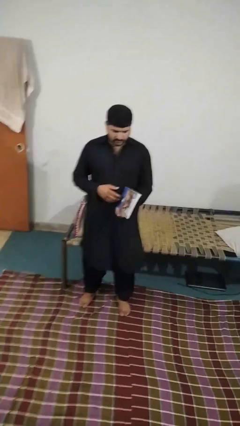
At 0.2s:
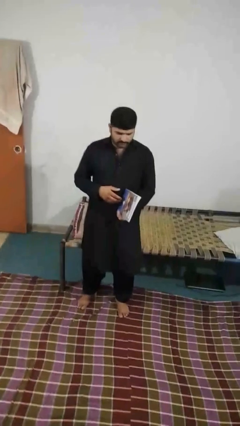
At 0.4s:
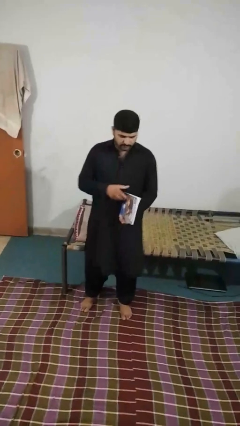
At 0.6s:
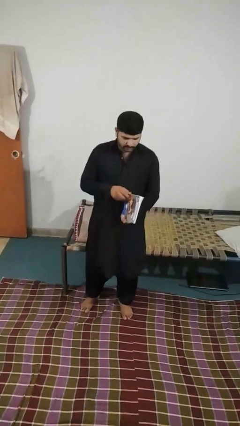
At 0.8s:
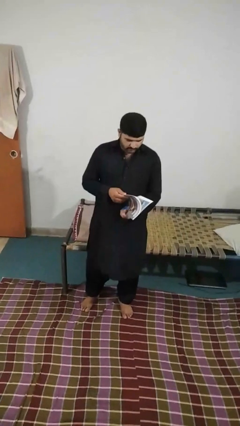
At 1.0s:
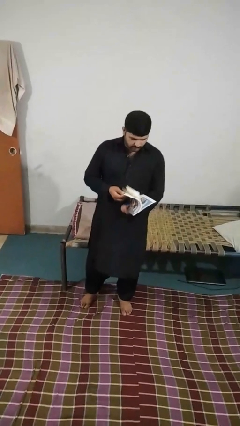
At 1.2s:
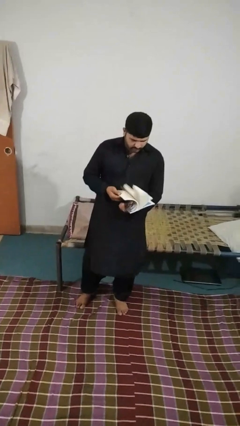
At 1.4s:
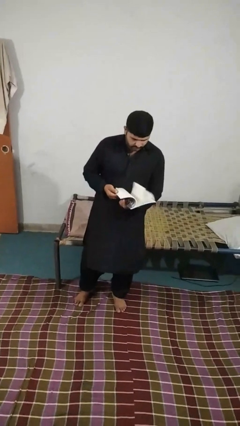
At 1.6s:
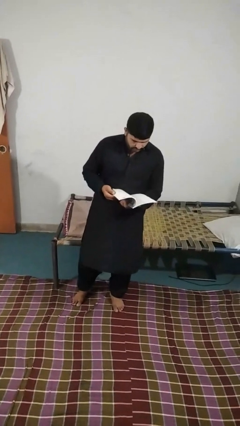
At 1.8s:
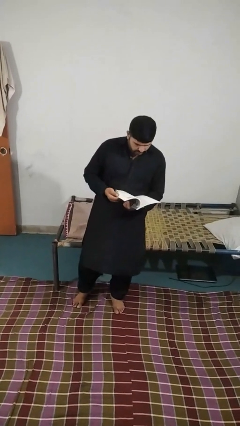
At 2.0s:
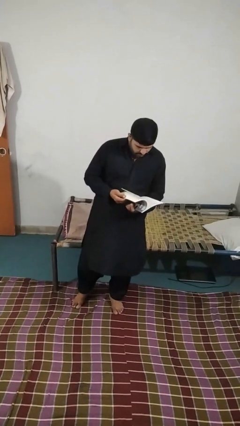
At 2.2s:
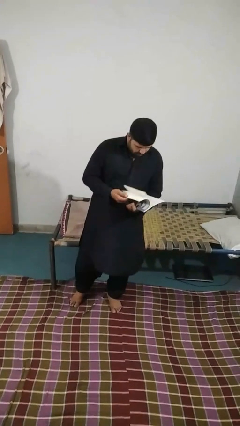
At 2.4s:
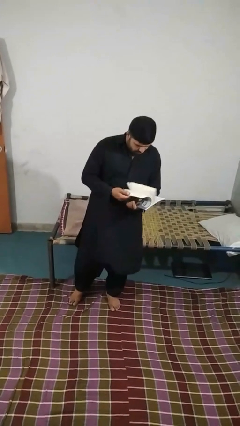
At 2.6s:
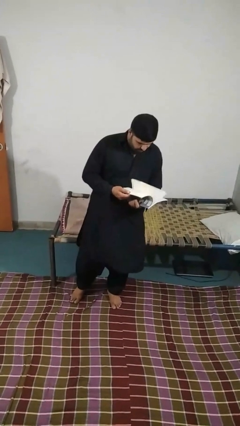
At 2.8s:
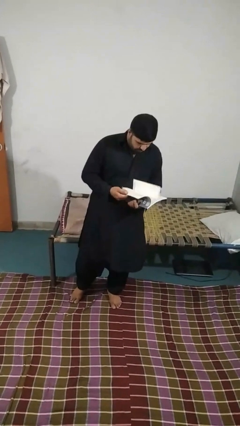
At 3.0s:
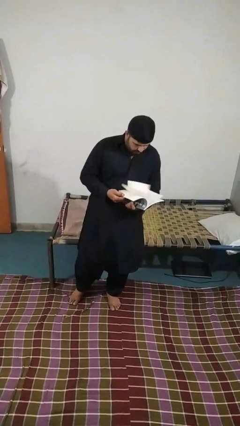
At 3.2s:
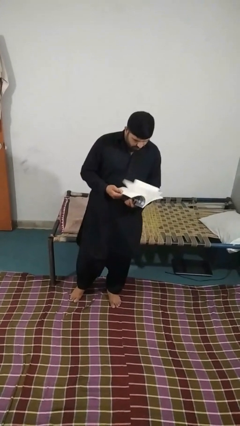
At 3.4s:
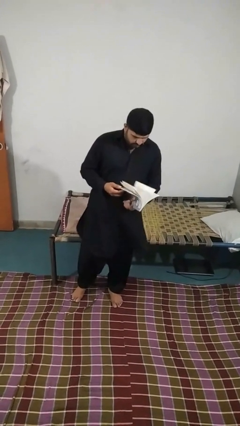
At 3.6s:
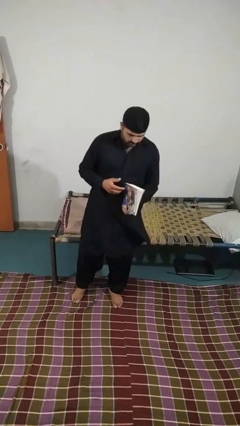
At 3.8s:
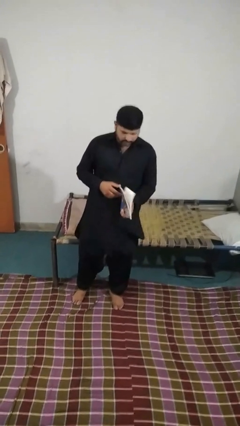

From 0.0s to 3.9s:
person reads magazine

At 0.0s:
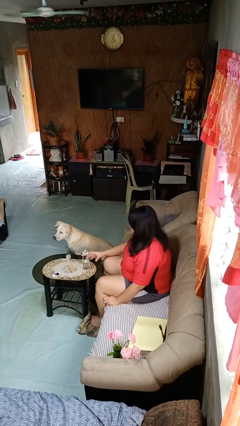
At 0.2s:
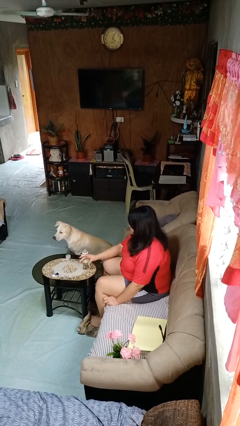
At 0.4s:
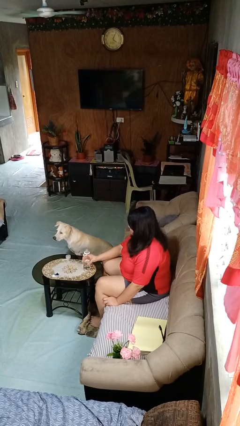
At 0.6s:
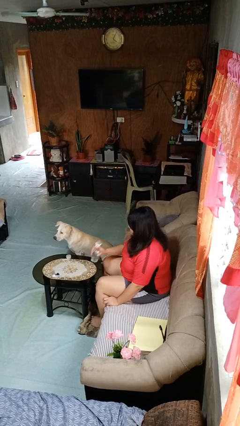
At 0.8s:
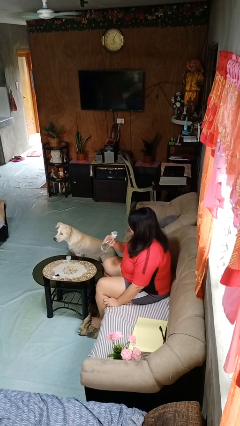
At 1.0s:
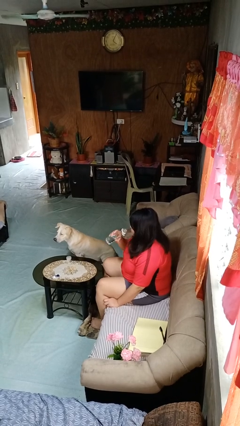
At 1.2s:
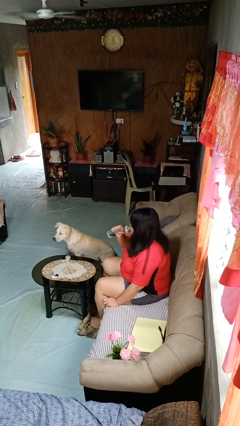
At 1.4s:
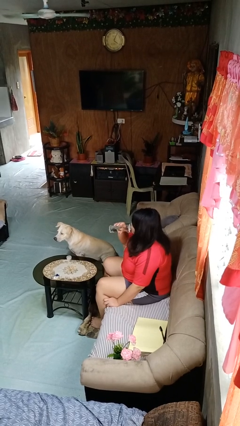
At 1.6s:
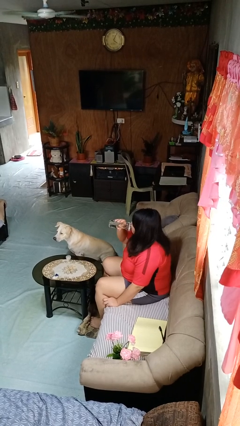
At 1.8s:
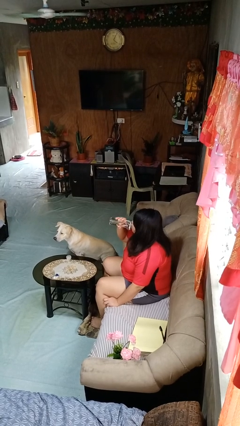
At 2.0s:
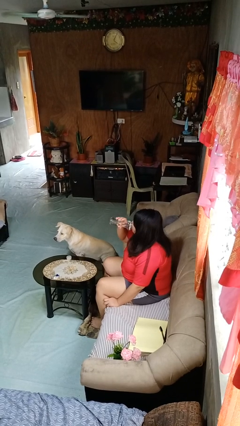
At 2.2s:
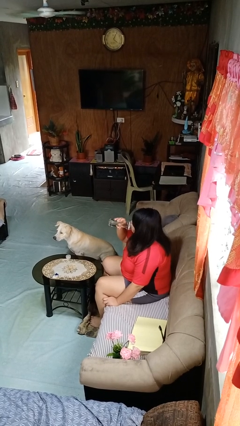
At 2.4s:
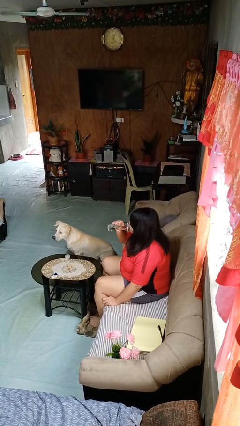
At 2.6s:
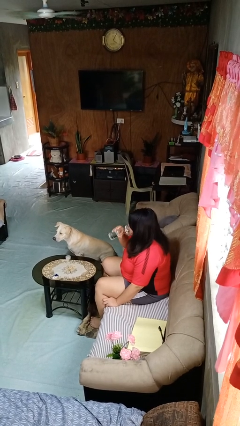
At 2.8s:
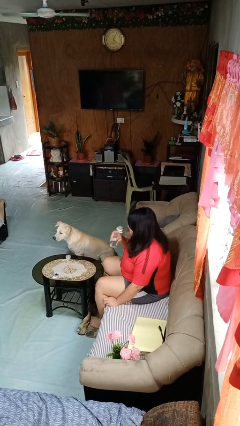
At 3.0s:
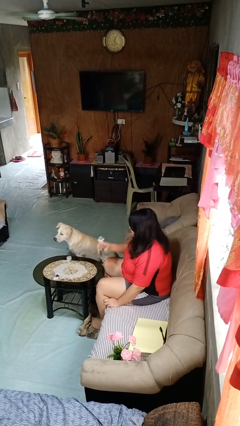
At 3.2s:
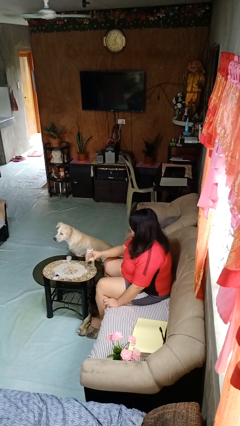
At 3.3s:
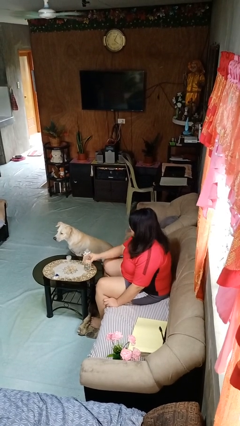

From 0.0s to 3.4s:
person drinks from bottle

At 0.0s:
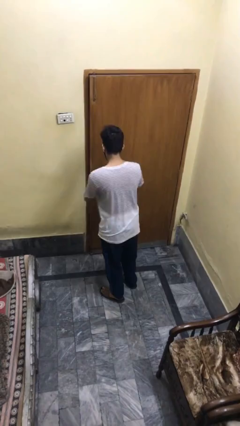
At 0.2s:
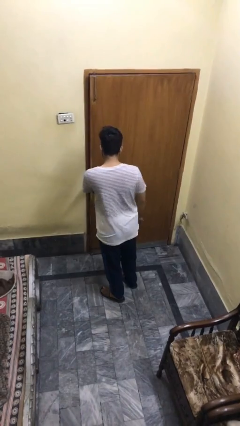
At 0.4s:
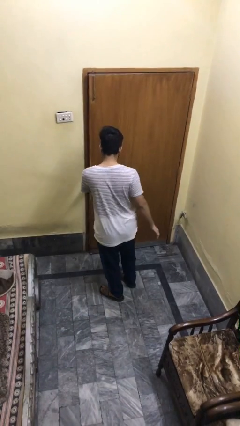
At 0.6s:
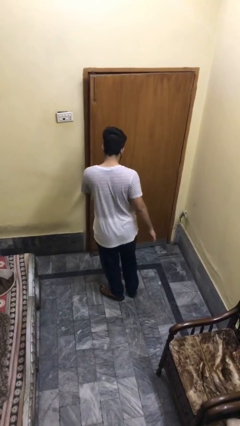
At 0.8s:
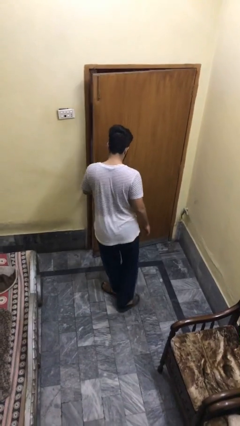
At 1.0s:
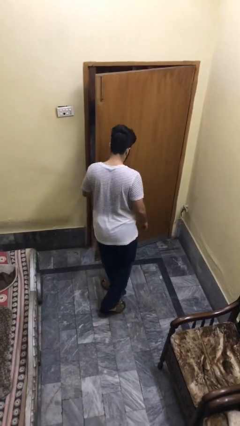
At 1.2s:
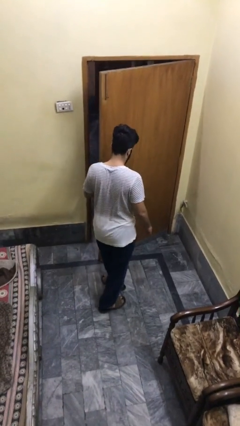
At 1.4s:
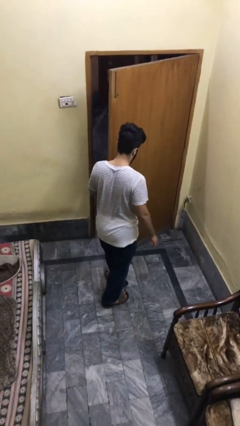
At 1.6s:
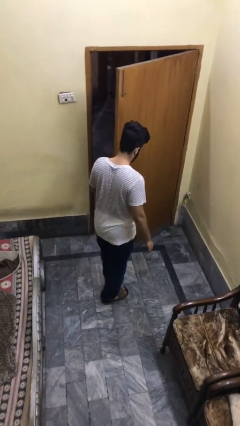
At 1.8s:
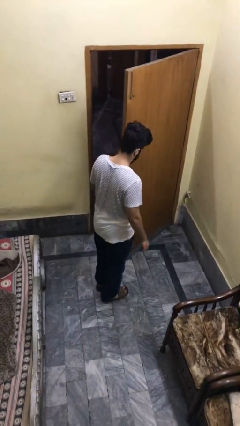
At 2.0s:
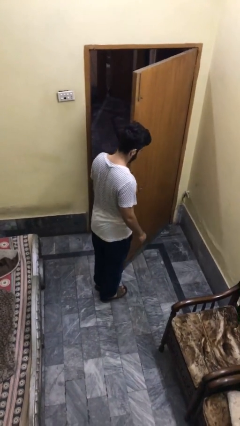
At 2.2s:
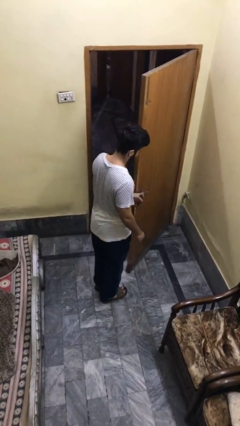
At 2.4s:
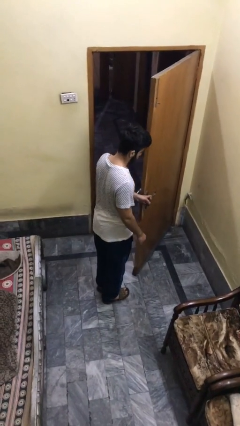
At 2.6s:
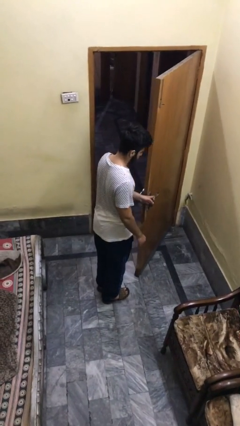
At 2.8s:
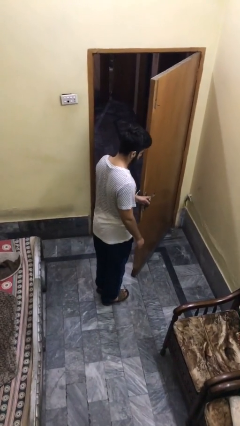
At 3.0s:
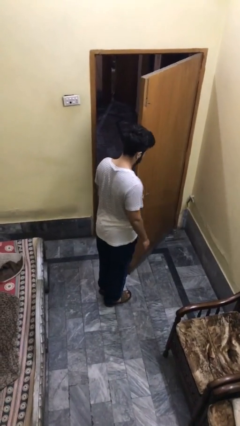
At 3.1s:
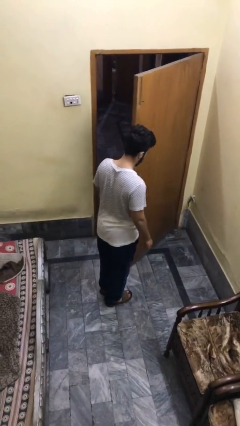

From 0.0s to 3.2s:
person opens facility door

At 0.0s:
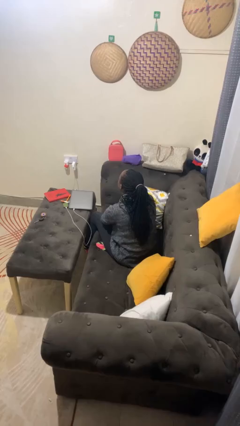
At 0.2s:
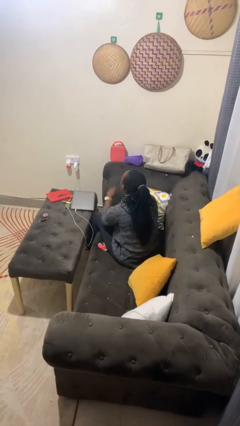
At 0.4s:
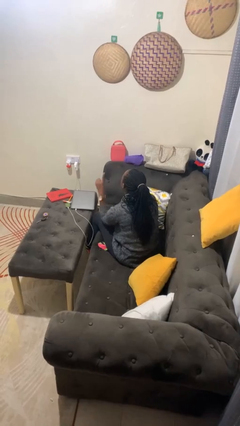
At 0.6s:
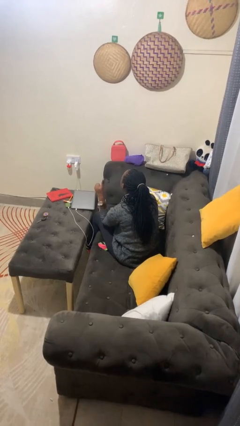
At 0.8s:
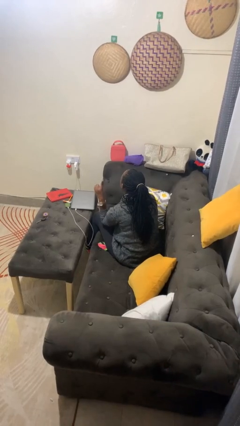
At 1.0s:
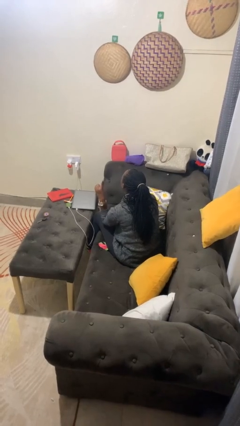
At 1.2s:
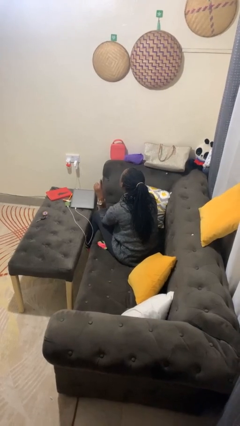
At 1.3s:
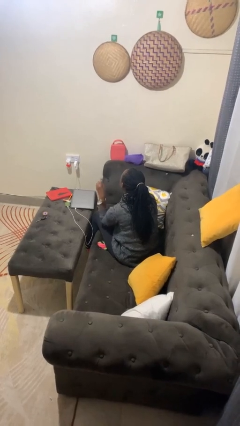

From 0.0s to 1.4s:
person gestures number one

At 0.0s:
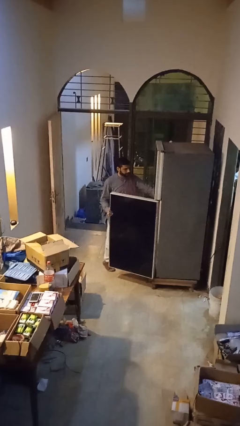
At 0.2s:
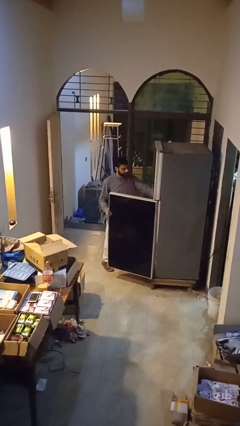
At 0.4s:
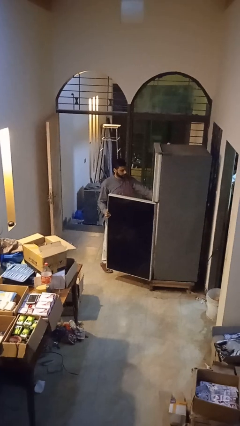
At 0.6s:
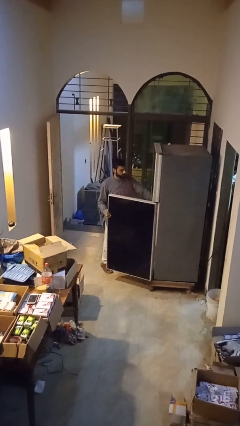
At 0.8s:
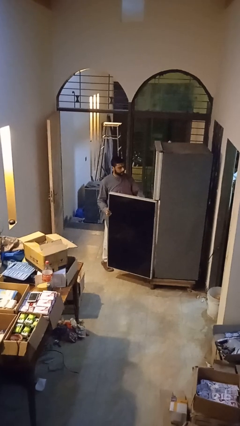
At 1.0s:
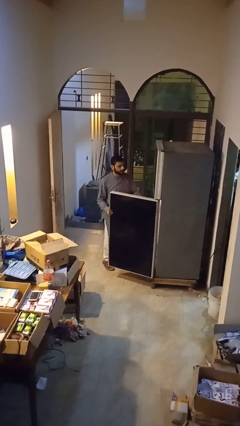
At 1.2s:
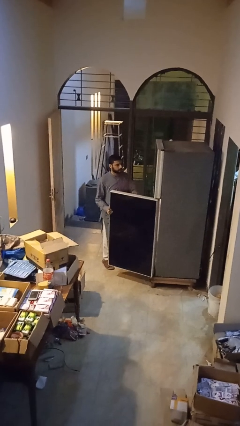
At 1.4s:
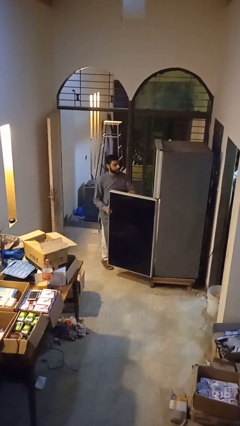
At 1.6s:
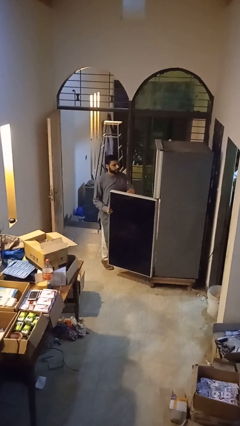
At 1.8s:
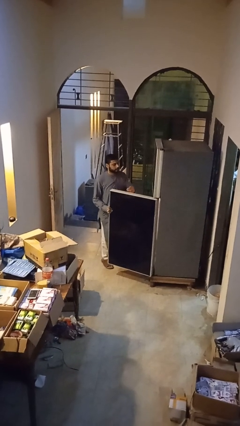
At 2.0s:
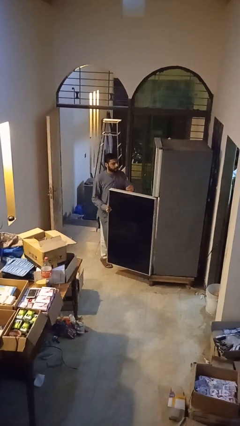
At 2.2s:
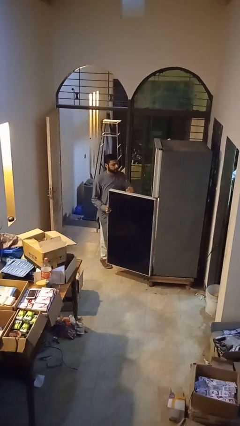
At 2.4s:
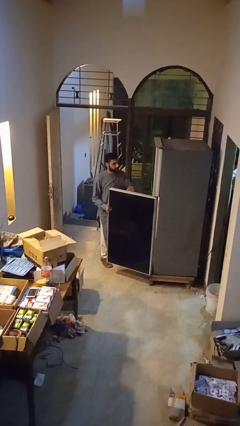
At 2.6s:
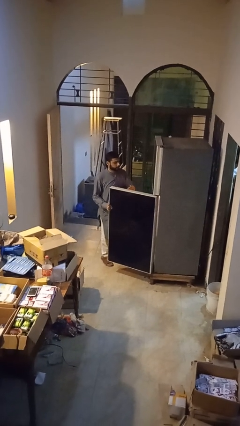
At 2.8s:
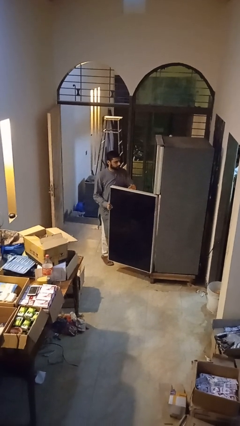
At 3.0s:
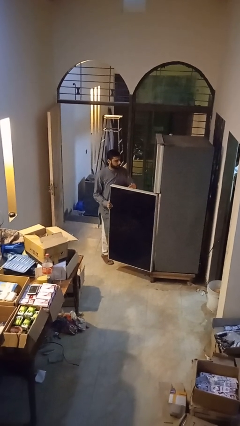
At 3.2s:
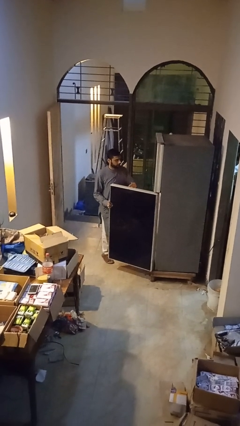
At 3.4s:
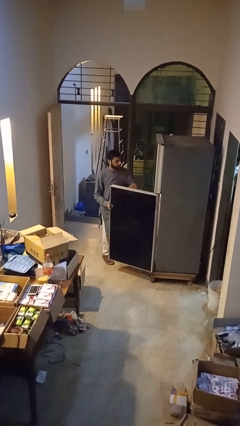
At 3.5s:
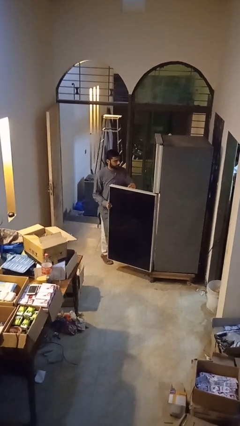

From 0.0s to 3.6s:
person puts object into refrigerator

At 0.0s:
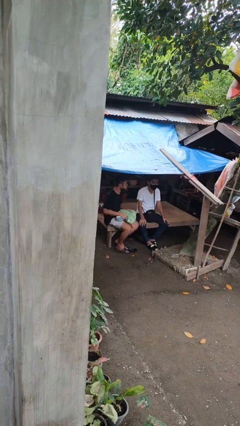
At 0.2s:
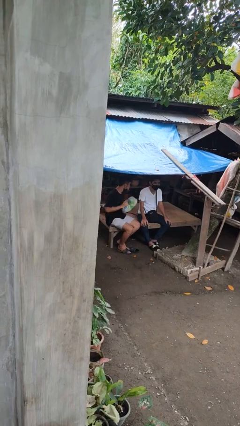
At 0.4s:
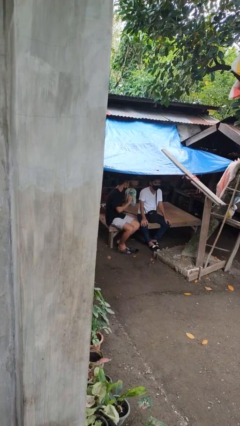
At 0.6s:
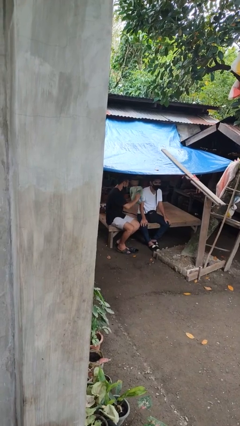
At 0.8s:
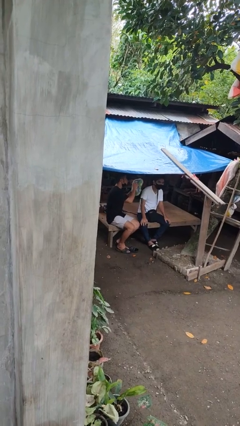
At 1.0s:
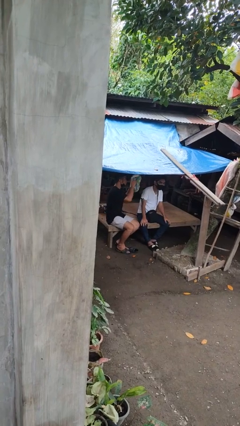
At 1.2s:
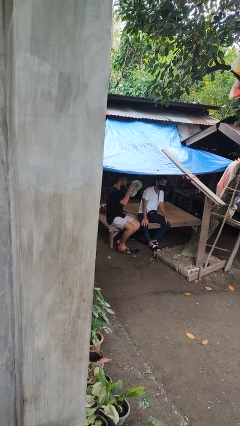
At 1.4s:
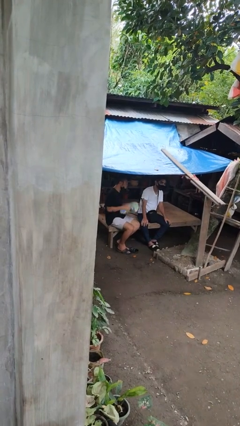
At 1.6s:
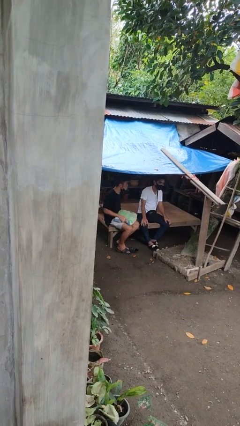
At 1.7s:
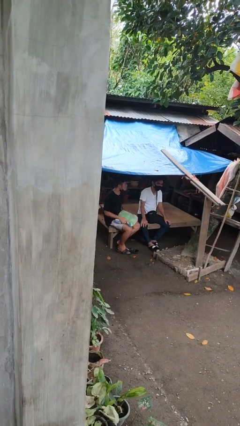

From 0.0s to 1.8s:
person hits person with pillow
